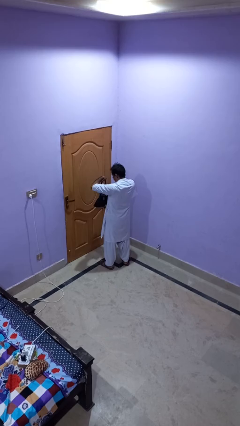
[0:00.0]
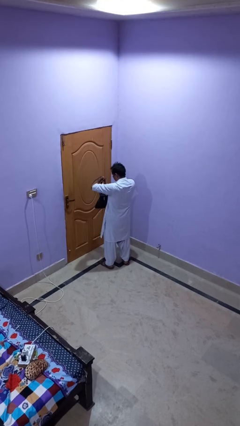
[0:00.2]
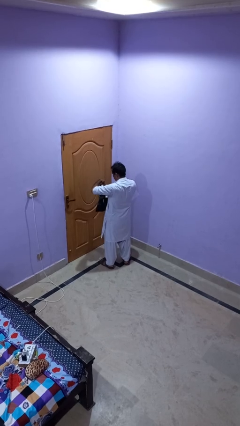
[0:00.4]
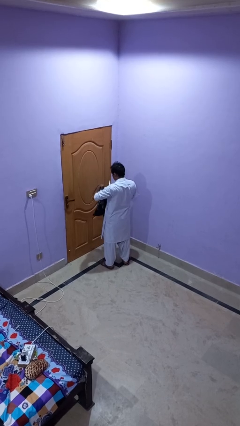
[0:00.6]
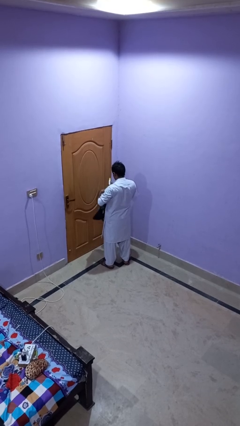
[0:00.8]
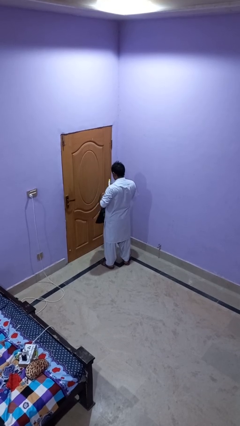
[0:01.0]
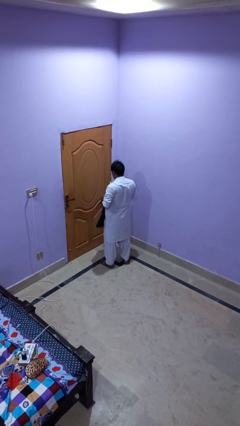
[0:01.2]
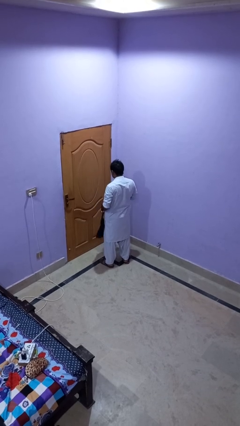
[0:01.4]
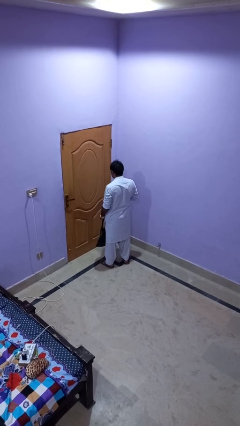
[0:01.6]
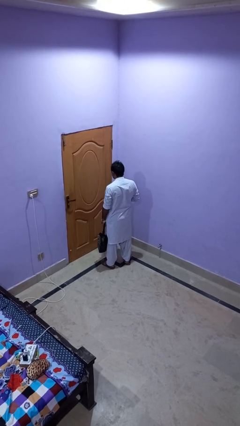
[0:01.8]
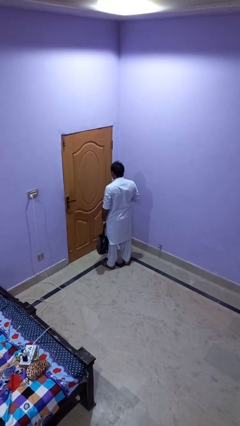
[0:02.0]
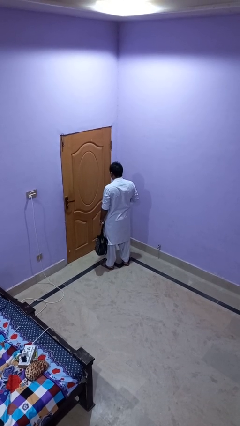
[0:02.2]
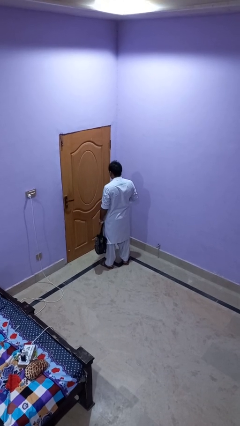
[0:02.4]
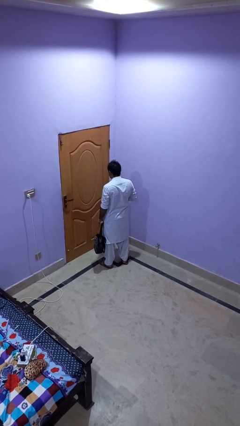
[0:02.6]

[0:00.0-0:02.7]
person takes object from purse

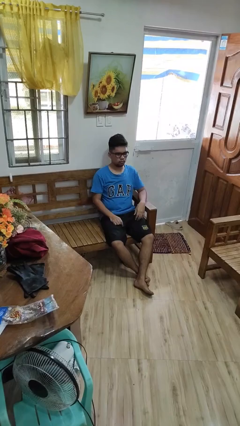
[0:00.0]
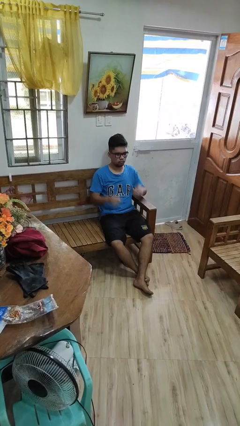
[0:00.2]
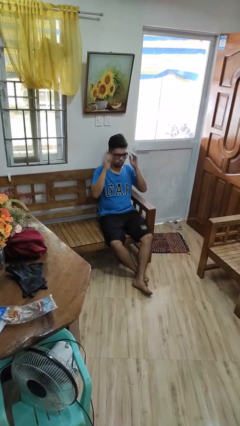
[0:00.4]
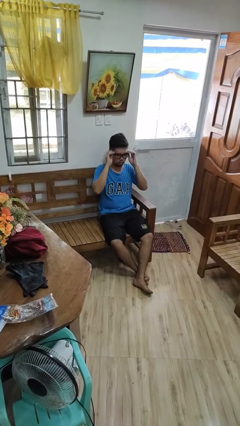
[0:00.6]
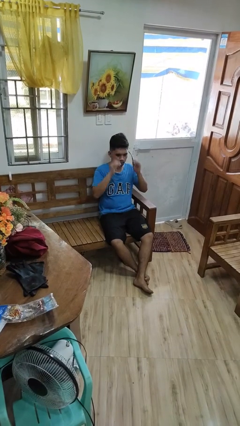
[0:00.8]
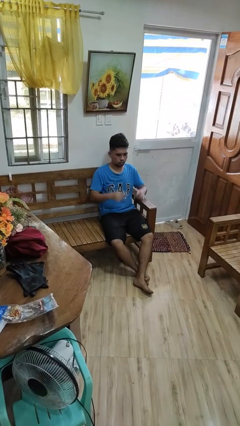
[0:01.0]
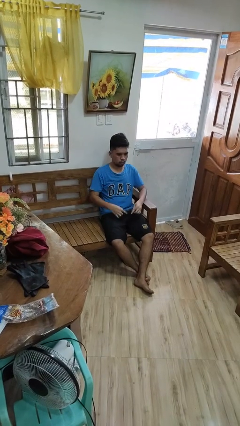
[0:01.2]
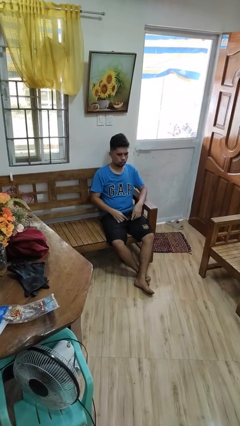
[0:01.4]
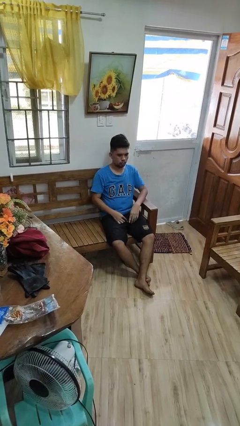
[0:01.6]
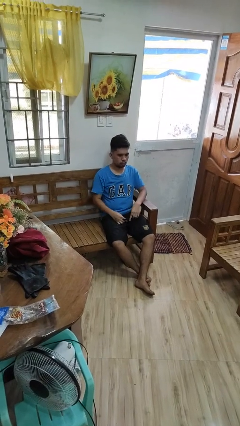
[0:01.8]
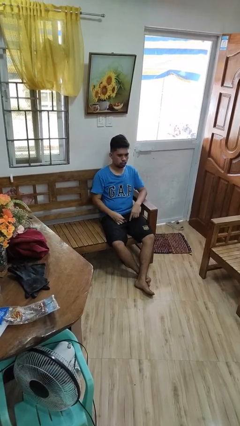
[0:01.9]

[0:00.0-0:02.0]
person takes off glasses

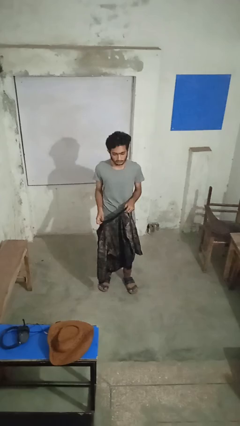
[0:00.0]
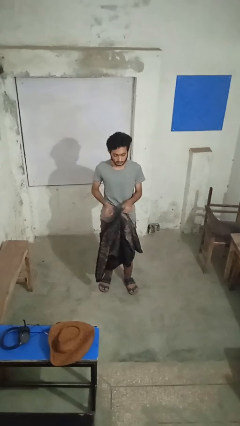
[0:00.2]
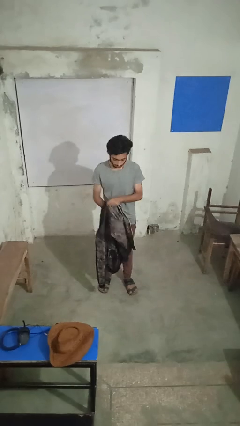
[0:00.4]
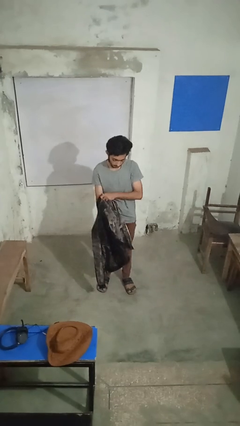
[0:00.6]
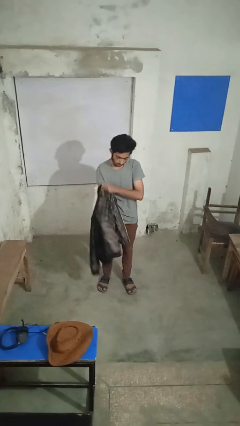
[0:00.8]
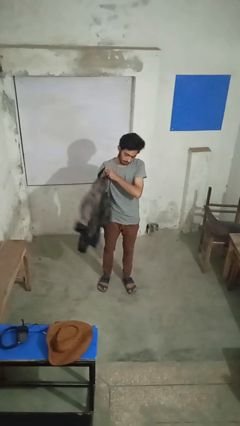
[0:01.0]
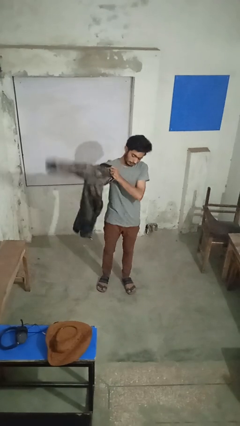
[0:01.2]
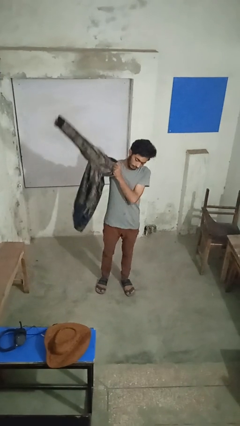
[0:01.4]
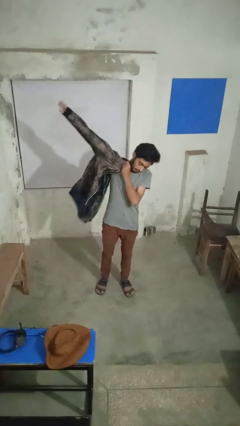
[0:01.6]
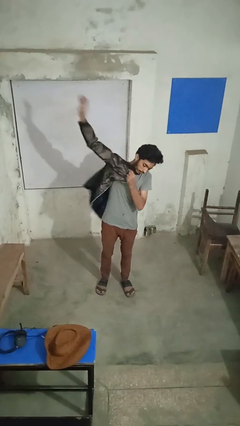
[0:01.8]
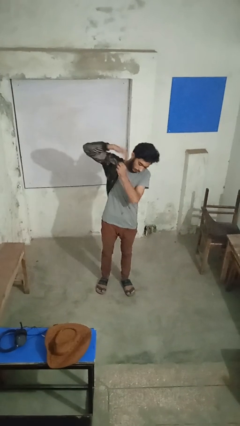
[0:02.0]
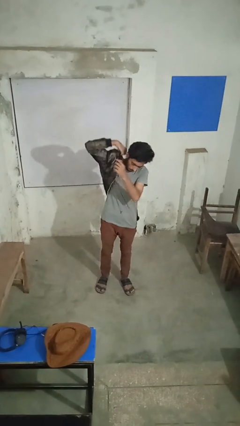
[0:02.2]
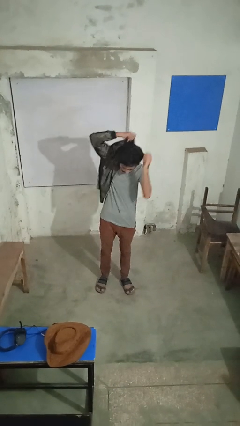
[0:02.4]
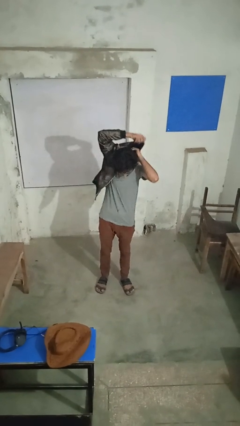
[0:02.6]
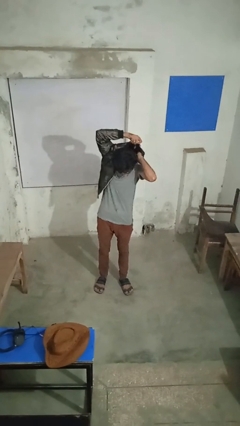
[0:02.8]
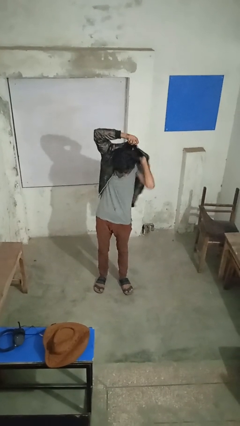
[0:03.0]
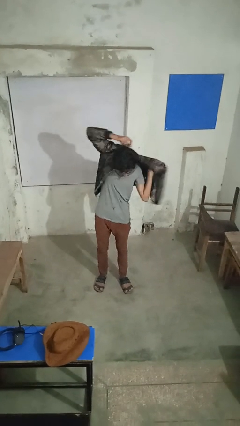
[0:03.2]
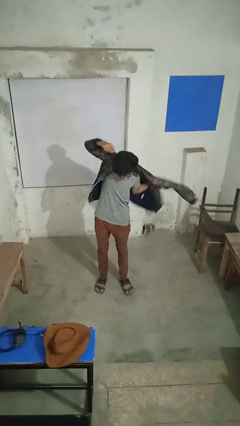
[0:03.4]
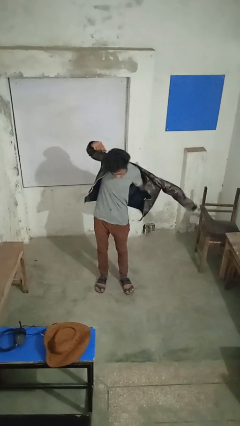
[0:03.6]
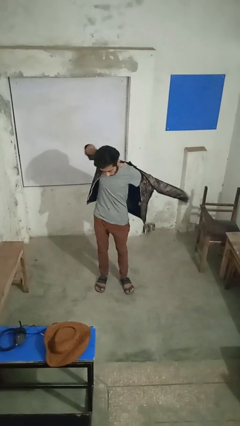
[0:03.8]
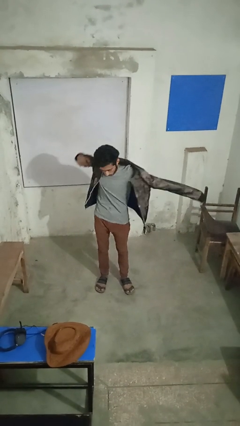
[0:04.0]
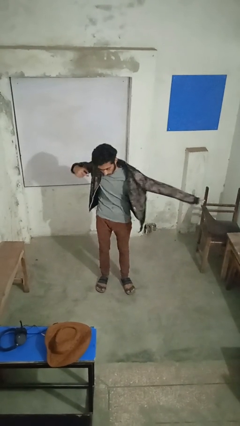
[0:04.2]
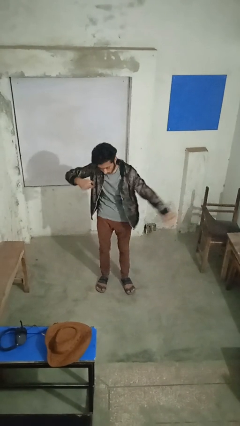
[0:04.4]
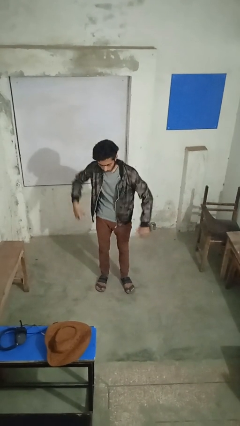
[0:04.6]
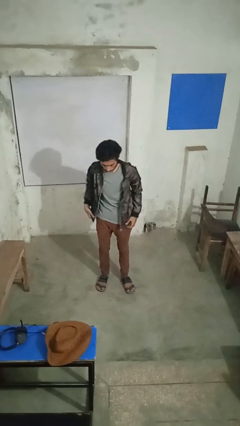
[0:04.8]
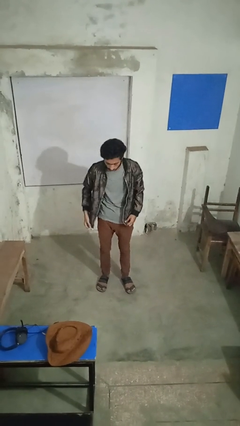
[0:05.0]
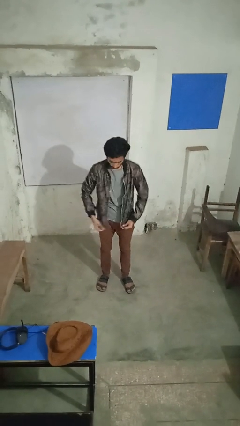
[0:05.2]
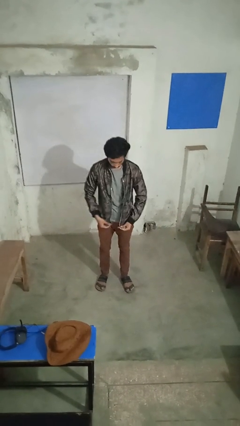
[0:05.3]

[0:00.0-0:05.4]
person puts on jacket

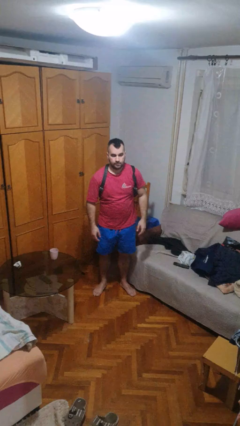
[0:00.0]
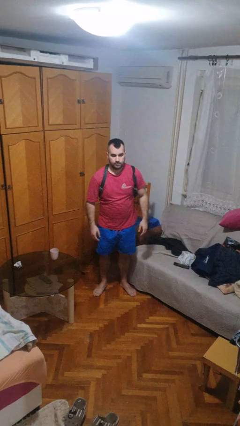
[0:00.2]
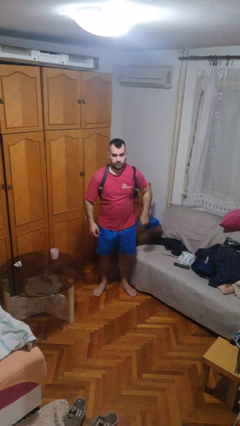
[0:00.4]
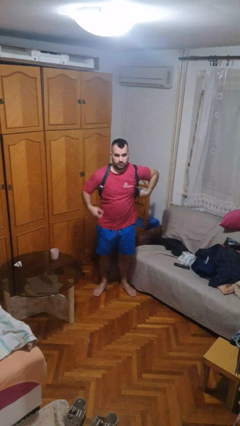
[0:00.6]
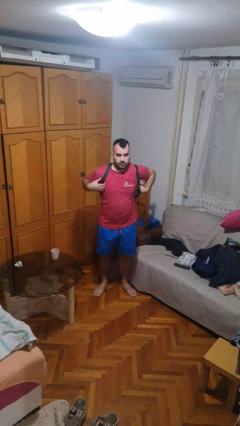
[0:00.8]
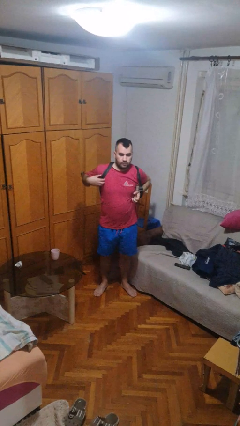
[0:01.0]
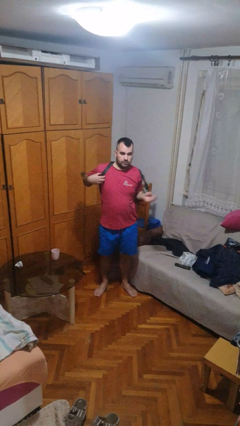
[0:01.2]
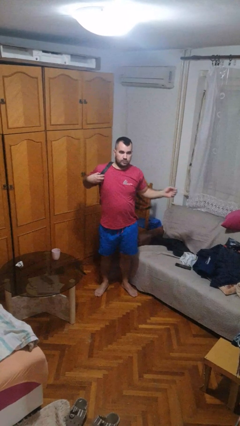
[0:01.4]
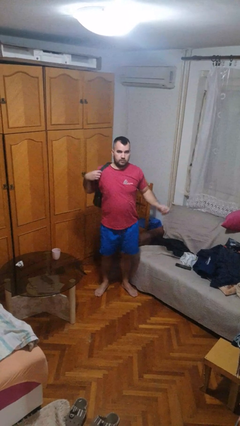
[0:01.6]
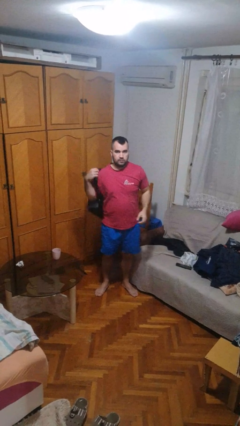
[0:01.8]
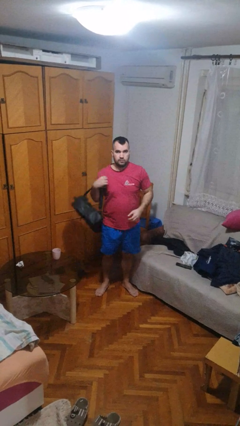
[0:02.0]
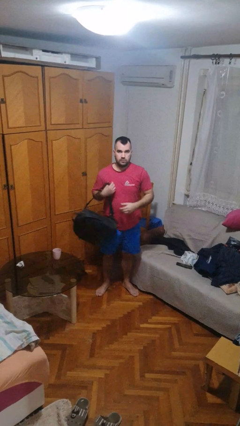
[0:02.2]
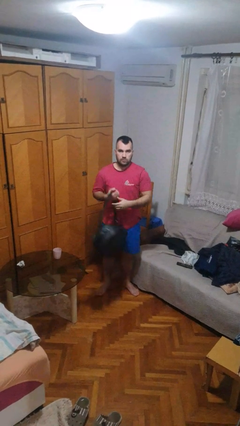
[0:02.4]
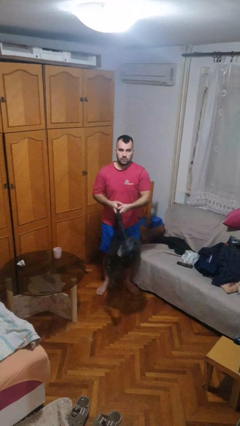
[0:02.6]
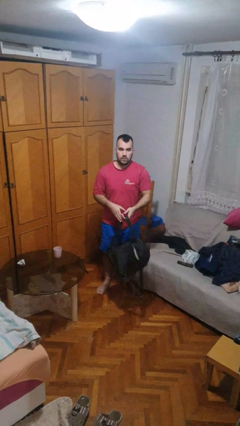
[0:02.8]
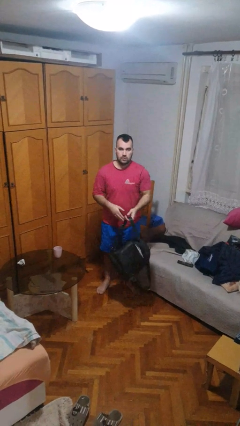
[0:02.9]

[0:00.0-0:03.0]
person takes off backpack

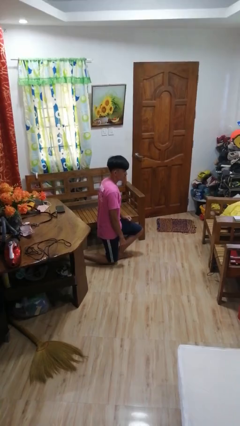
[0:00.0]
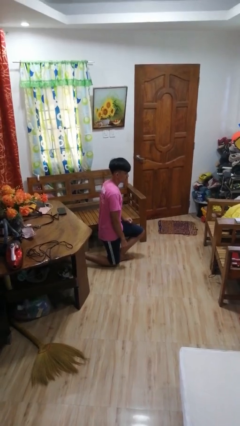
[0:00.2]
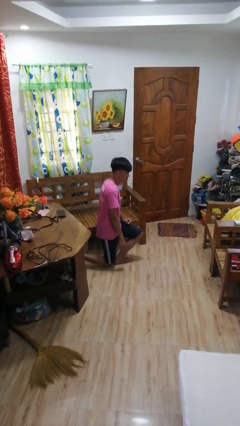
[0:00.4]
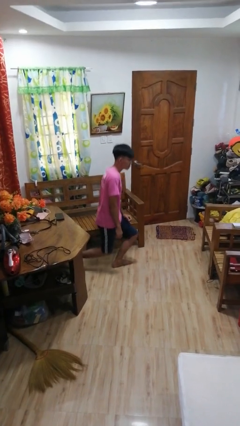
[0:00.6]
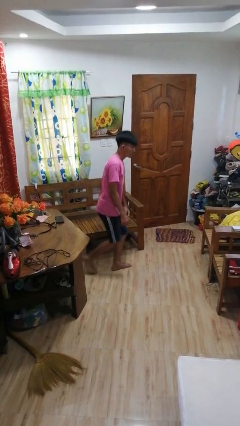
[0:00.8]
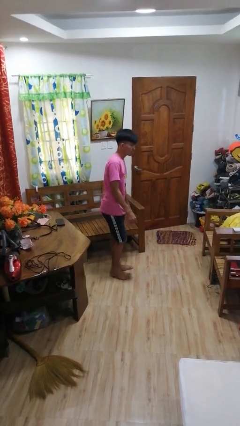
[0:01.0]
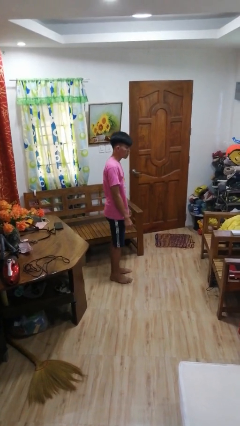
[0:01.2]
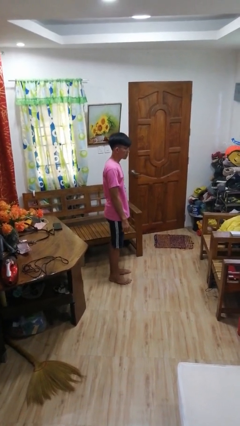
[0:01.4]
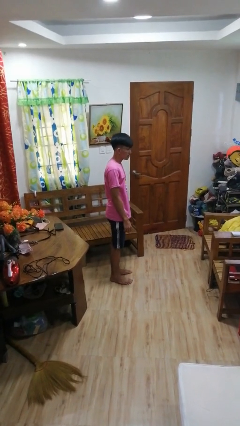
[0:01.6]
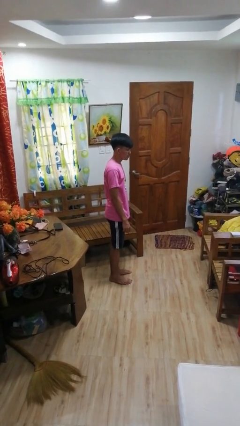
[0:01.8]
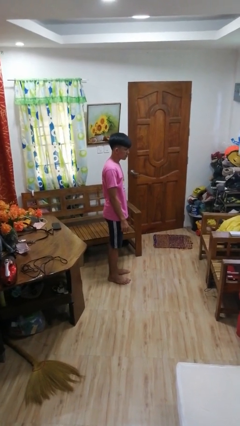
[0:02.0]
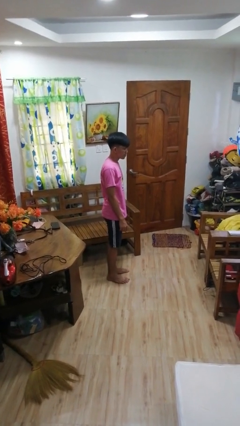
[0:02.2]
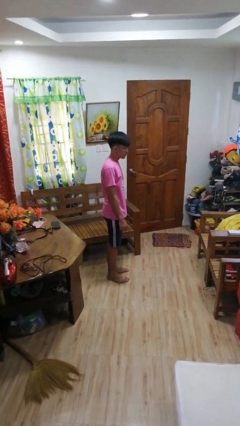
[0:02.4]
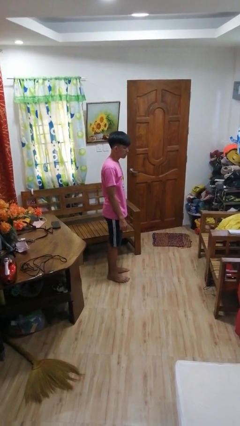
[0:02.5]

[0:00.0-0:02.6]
person stands up from floor

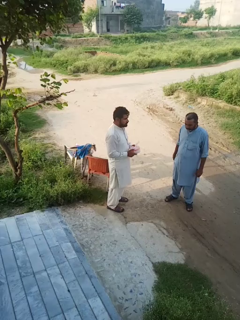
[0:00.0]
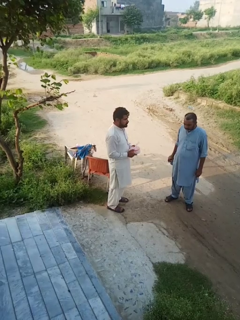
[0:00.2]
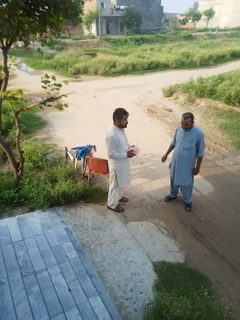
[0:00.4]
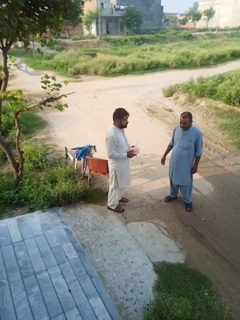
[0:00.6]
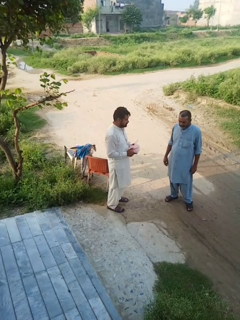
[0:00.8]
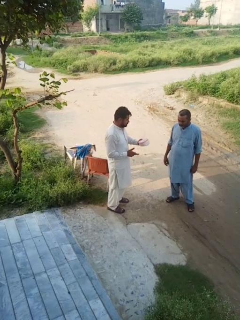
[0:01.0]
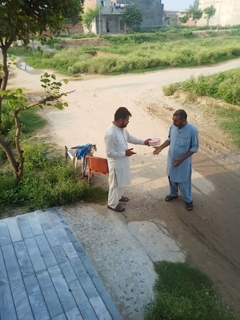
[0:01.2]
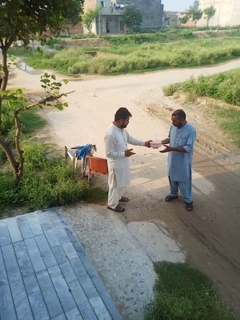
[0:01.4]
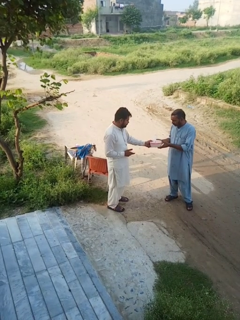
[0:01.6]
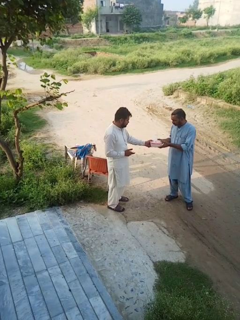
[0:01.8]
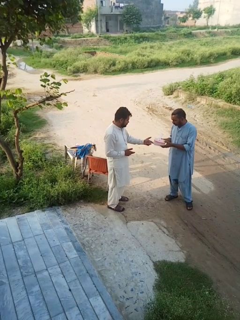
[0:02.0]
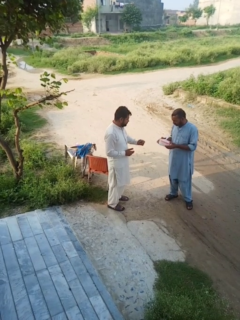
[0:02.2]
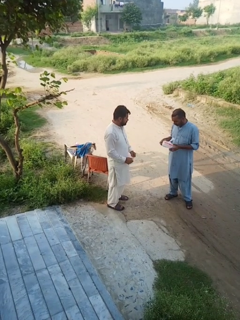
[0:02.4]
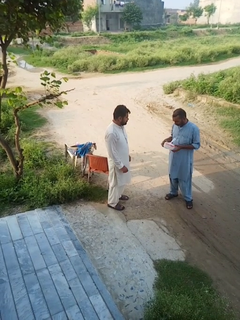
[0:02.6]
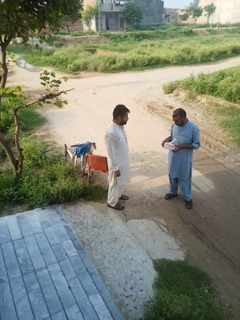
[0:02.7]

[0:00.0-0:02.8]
person transfers object to person
